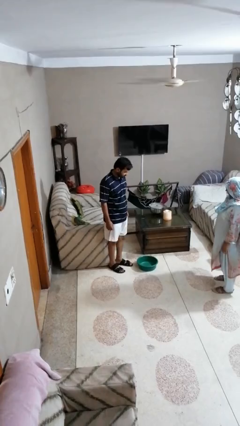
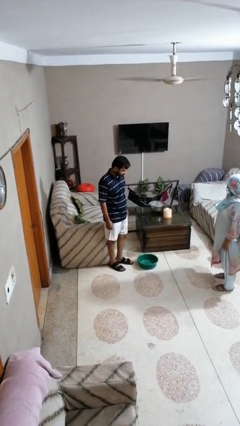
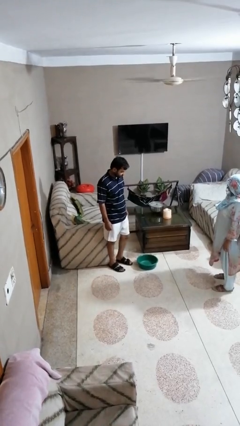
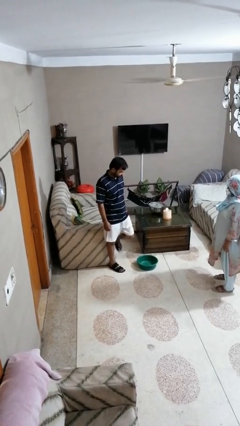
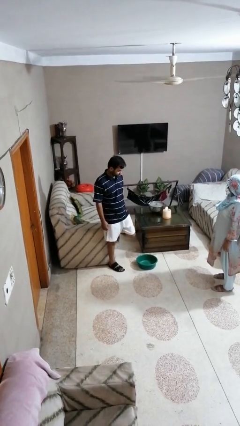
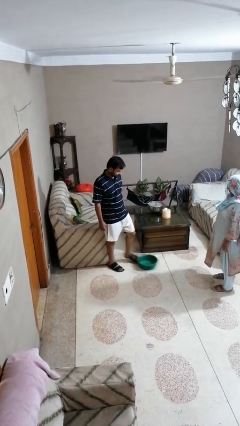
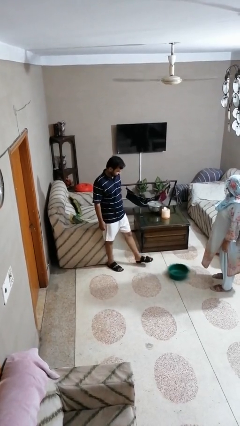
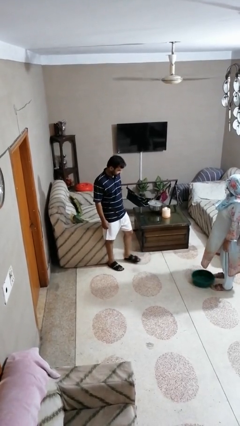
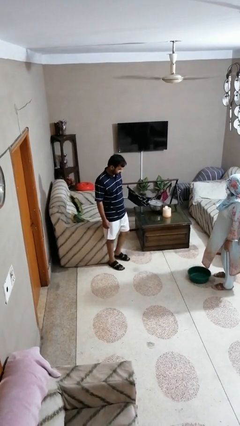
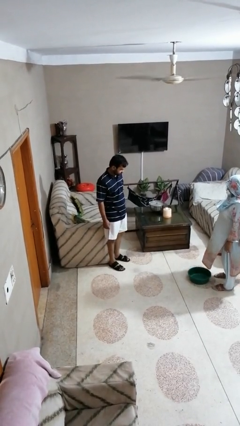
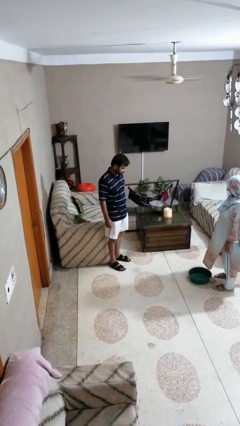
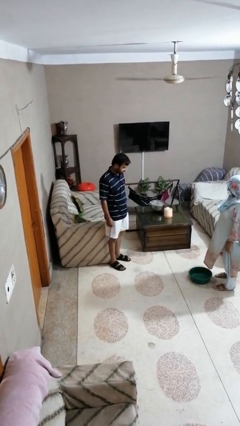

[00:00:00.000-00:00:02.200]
person kicks object to person

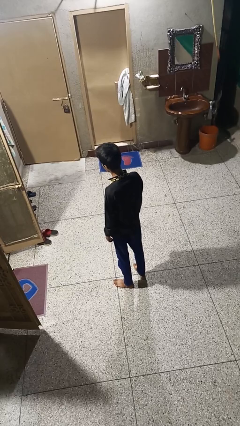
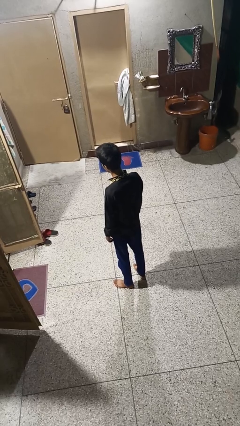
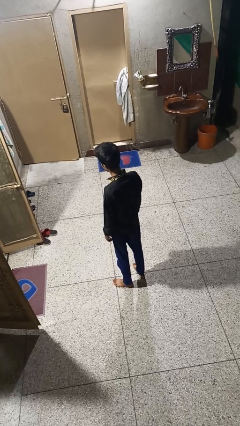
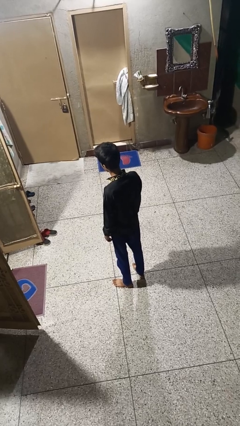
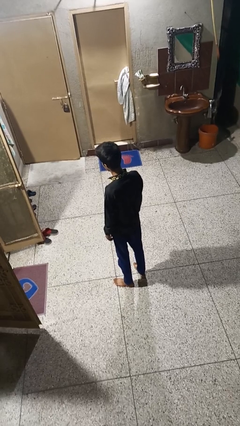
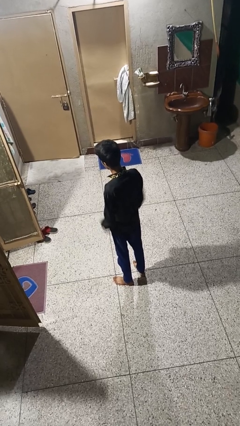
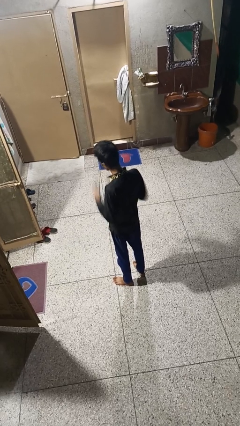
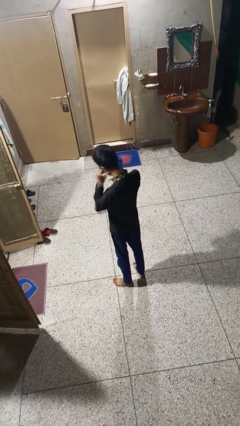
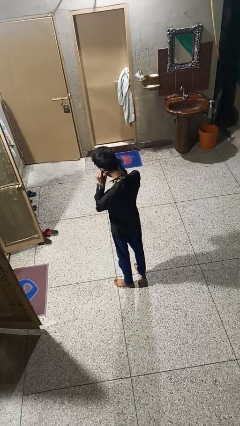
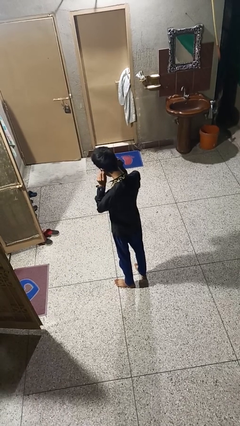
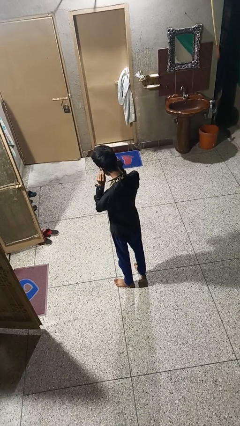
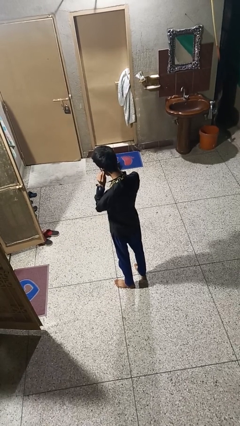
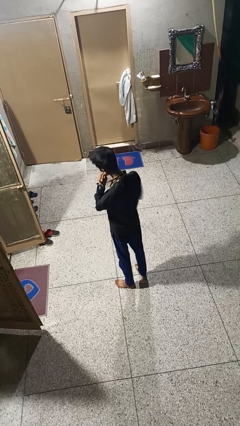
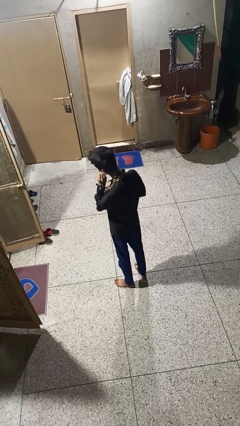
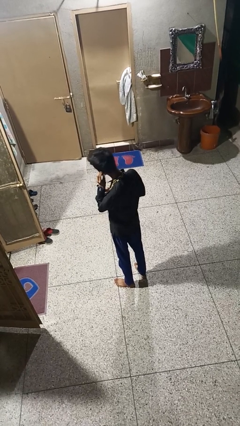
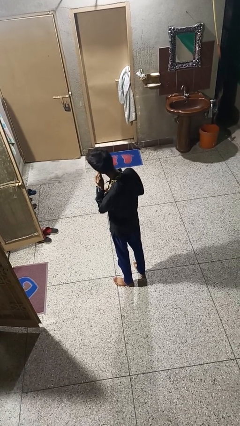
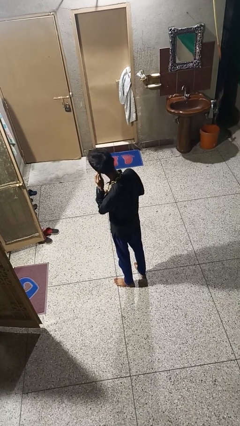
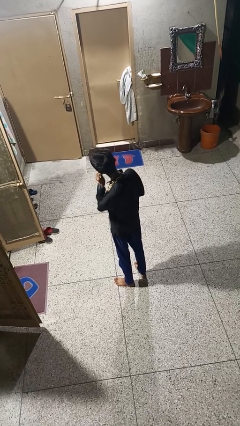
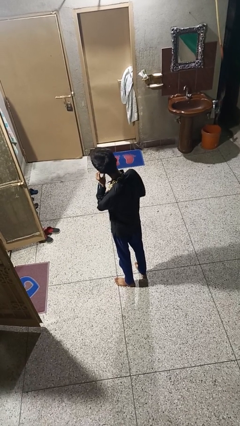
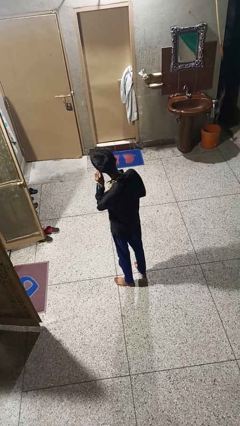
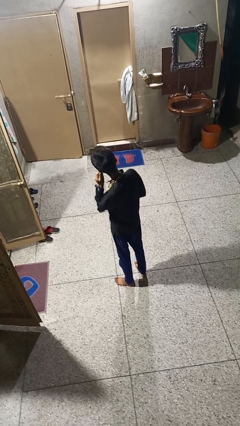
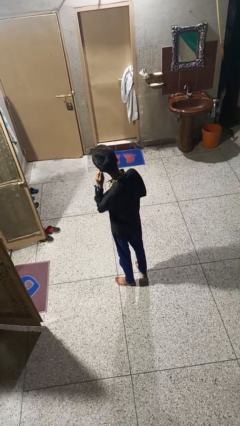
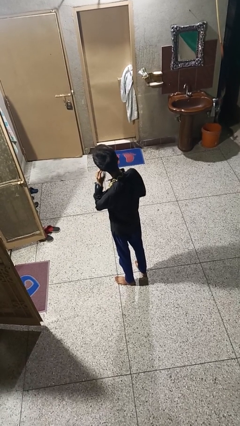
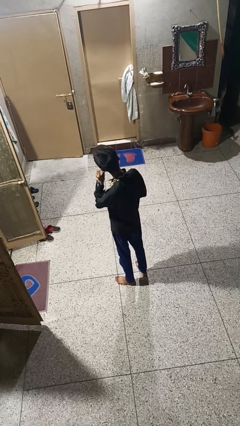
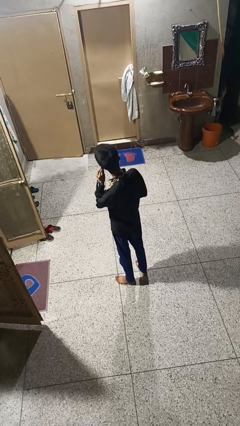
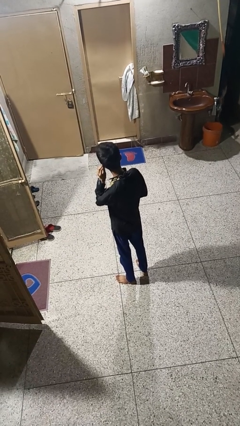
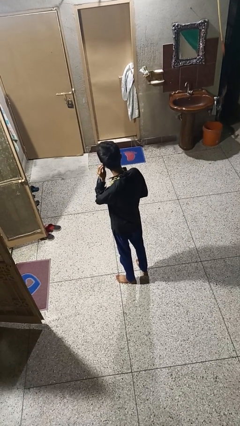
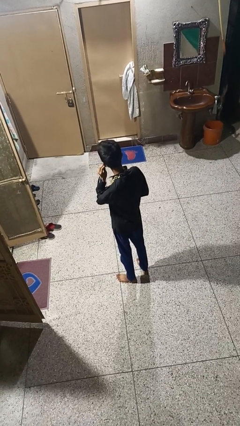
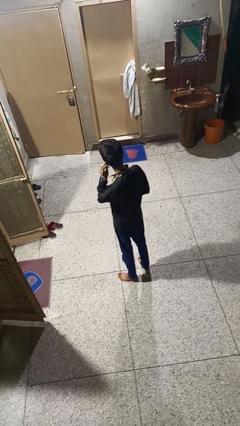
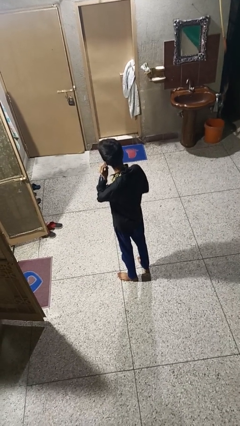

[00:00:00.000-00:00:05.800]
person touches earlobe

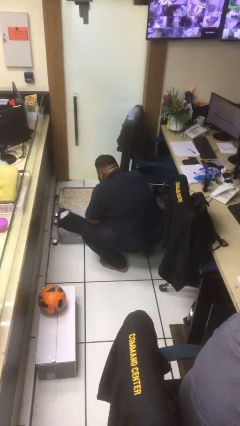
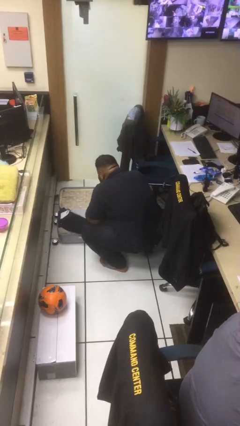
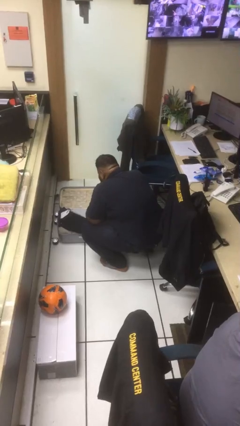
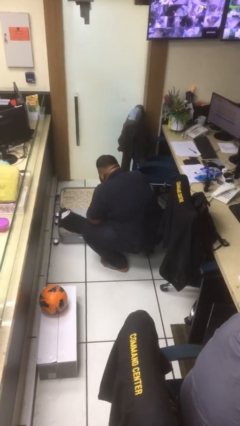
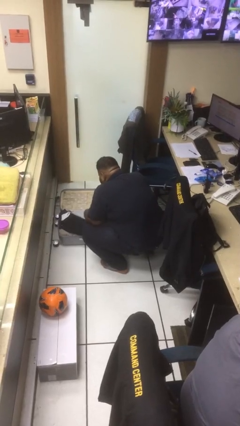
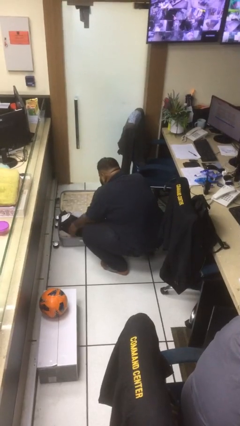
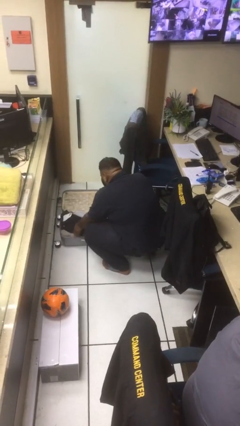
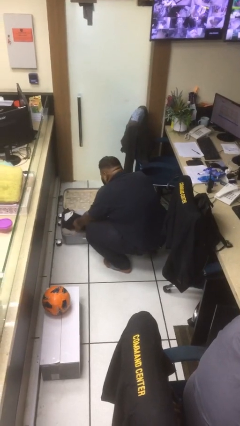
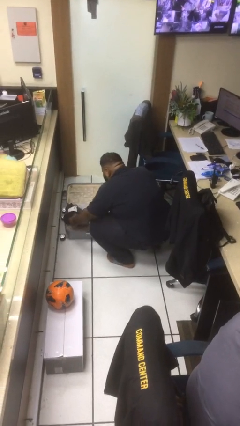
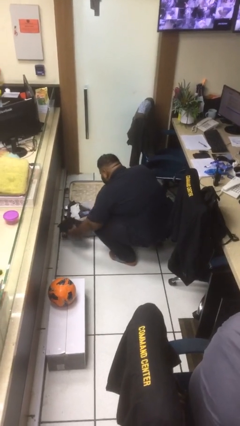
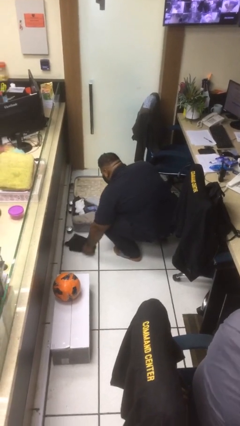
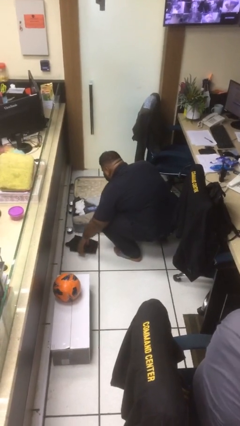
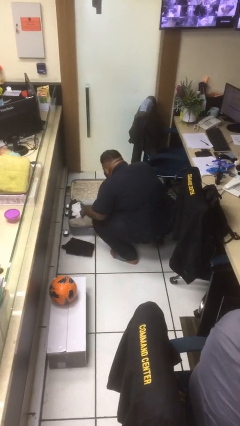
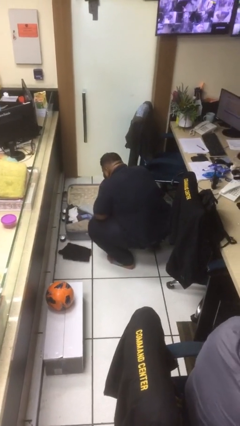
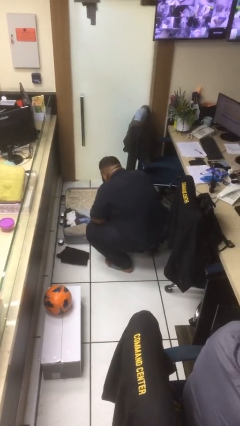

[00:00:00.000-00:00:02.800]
person unloads clothes from suitcase

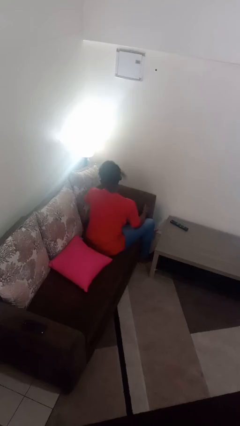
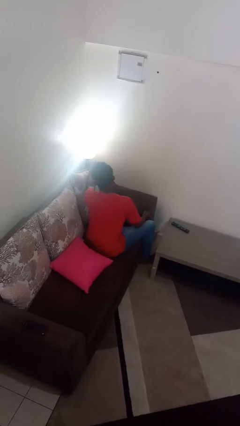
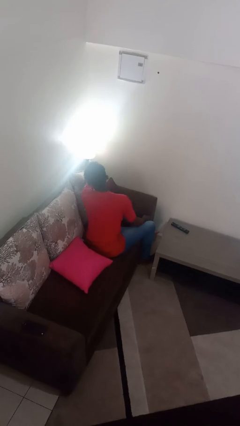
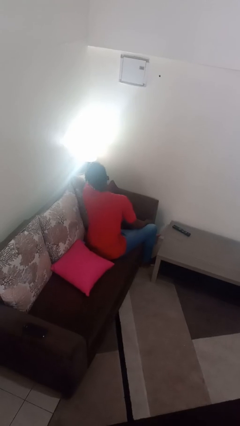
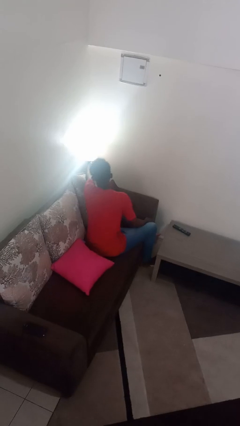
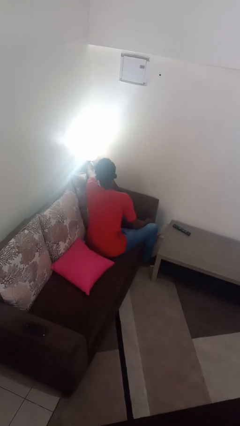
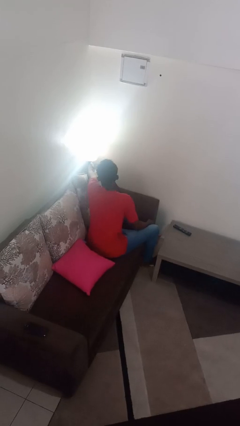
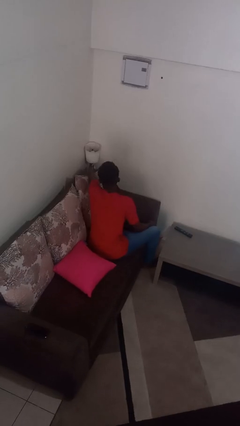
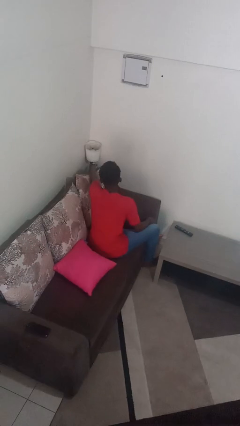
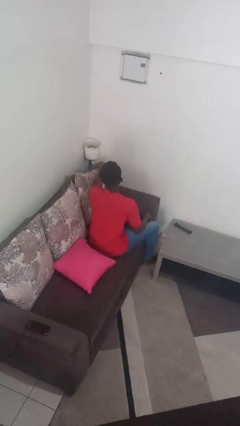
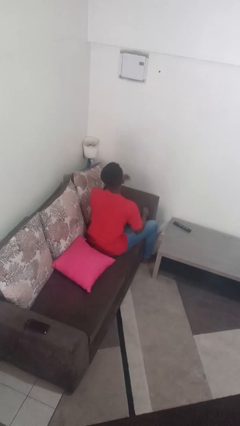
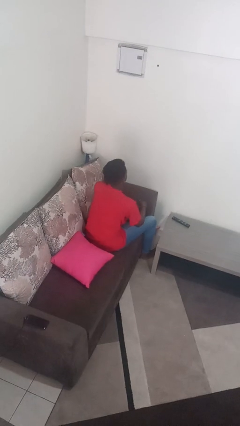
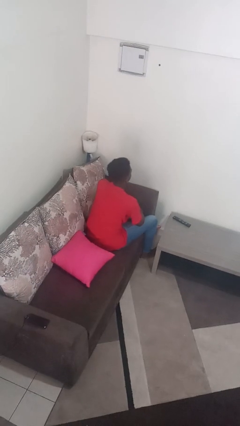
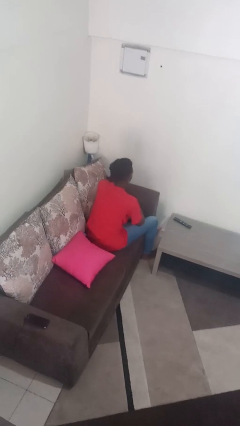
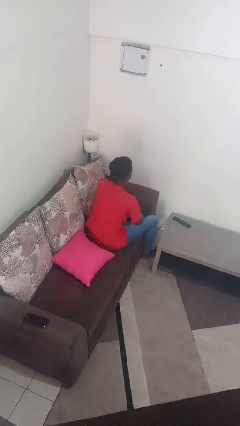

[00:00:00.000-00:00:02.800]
person turns off lamp

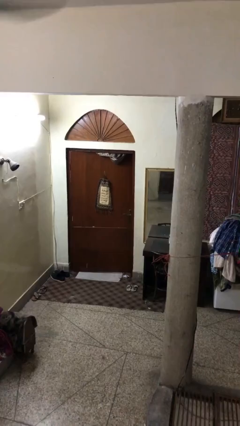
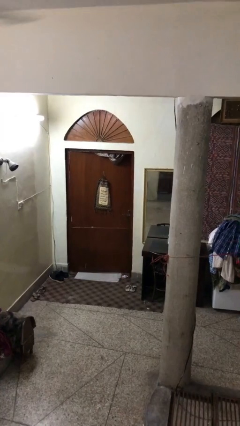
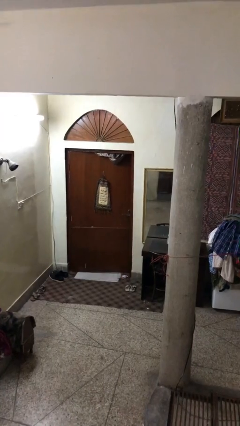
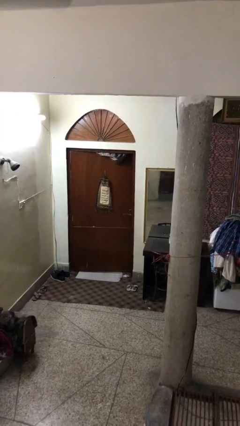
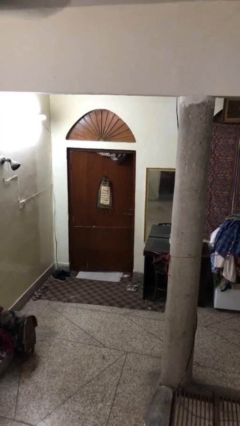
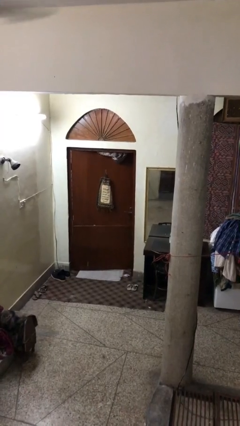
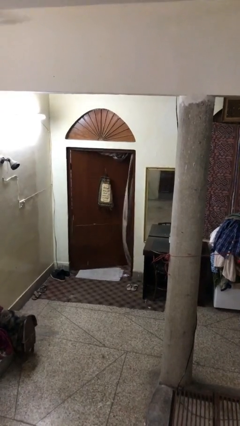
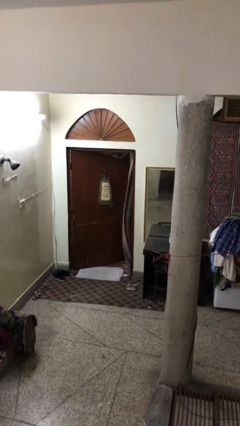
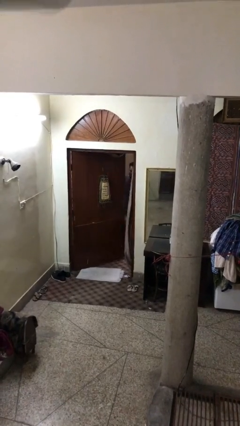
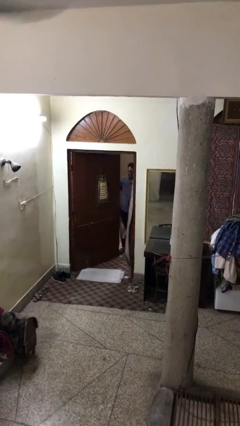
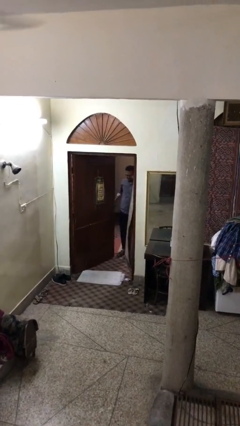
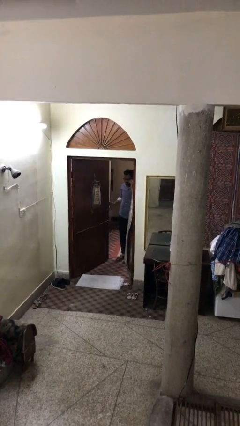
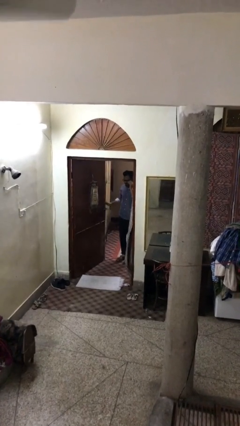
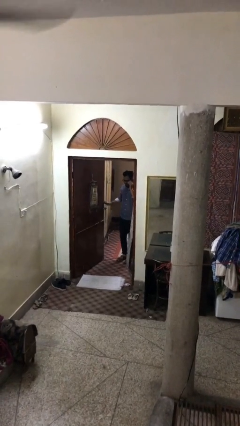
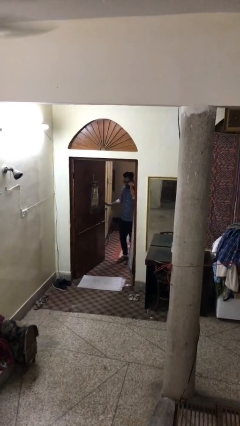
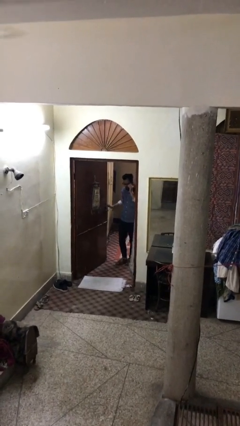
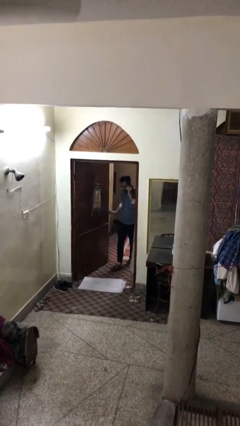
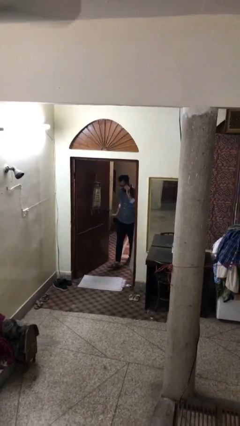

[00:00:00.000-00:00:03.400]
person opens facility door

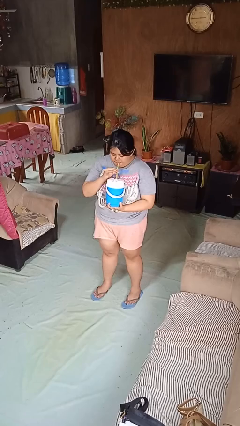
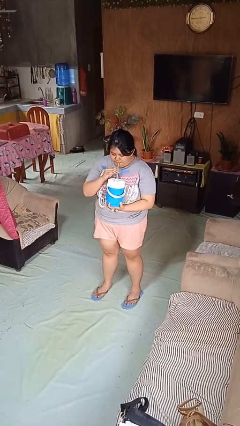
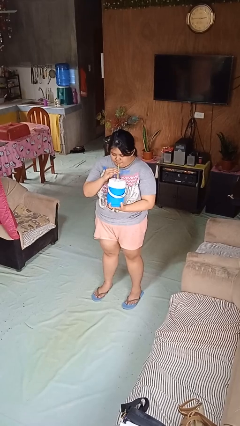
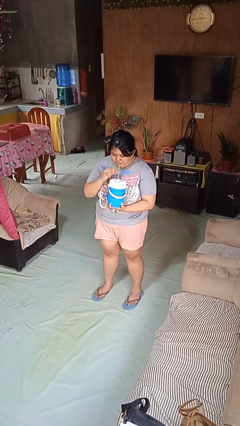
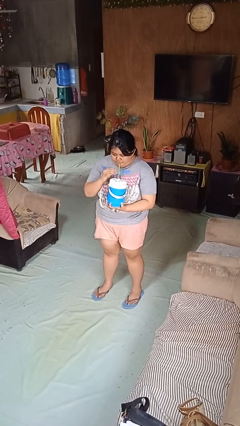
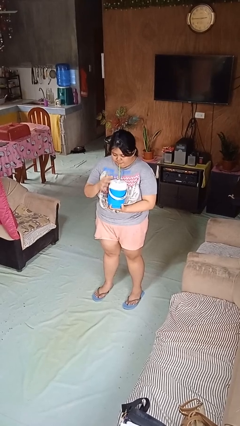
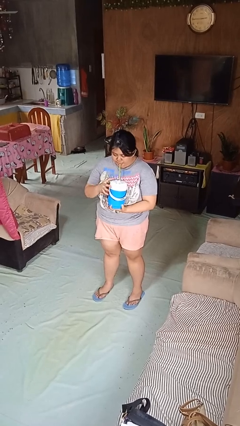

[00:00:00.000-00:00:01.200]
person drinks from straw
